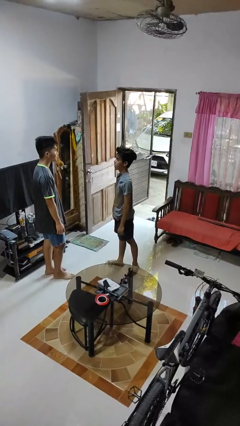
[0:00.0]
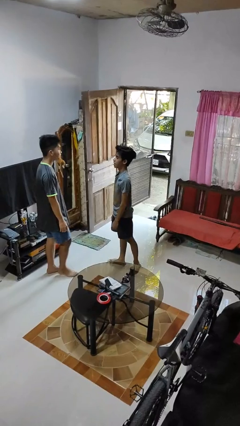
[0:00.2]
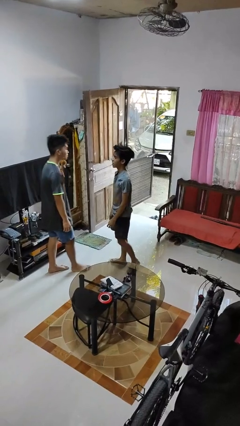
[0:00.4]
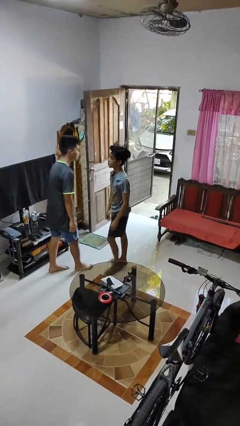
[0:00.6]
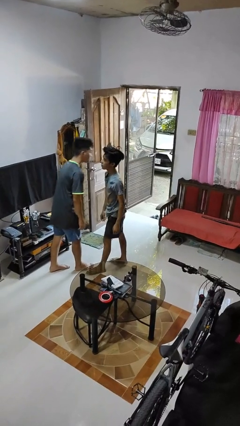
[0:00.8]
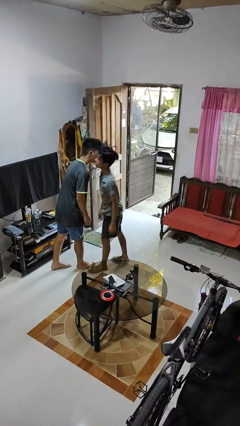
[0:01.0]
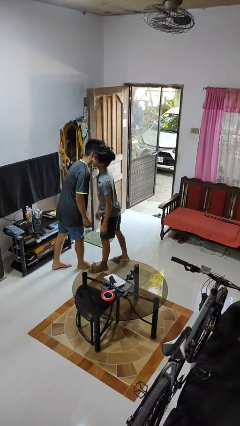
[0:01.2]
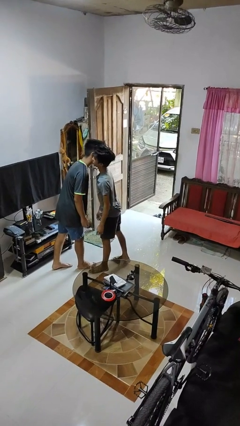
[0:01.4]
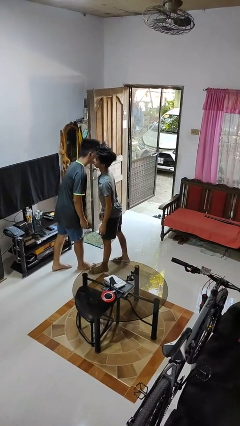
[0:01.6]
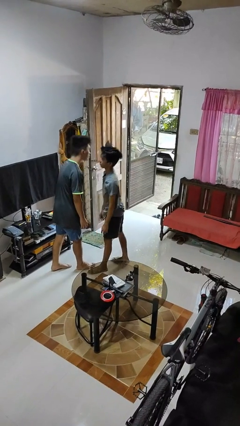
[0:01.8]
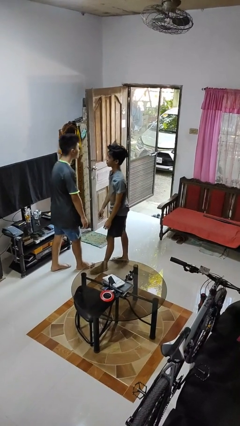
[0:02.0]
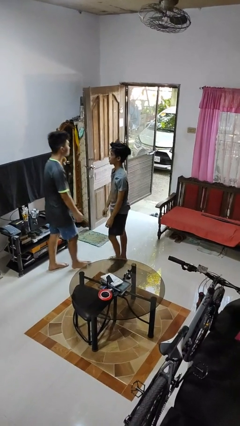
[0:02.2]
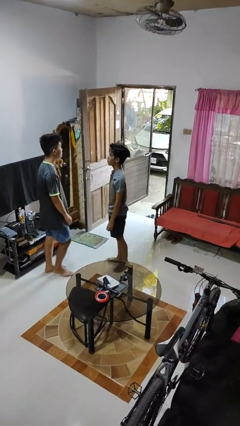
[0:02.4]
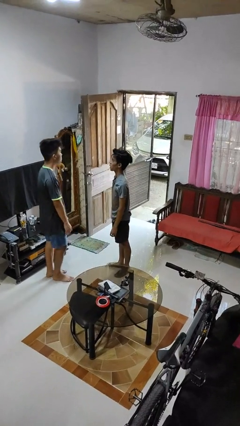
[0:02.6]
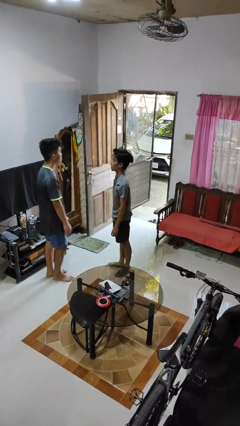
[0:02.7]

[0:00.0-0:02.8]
person kisses cheek of person

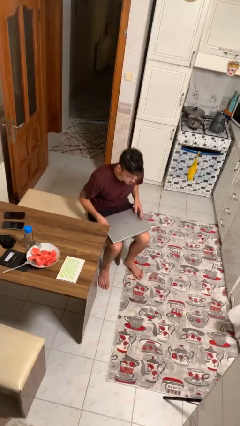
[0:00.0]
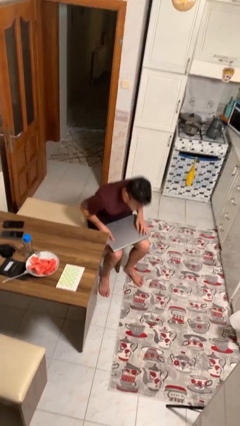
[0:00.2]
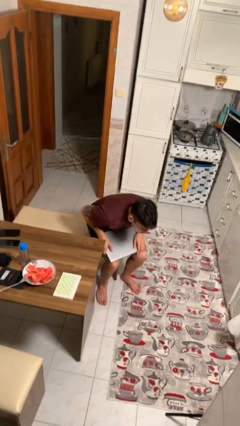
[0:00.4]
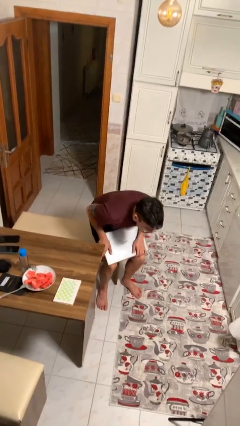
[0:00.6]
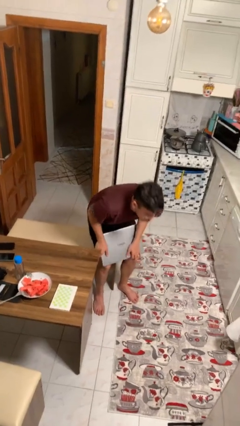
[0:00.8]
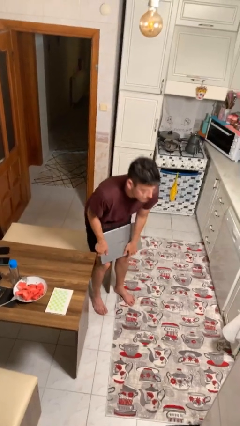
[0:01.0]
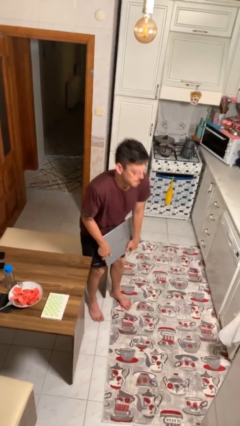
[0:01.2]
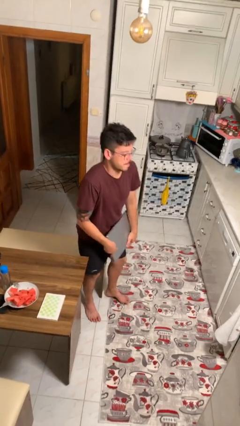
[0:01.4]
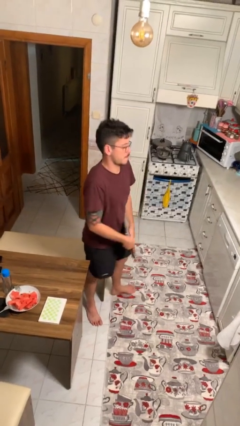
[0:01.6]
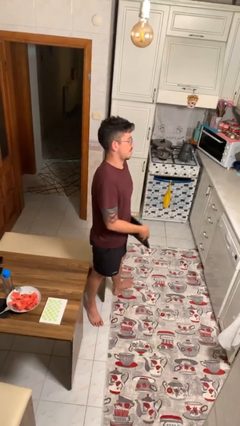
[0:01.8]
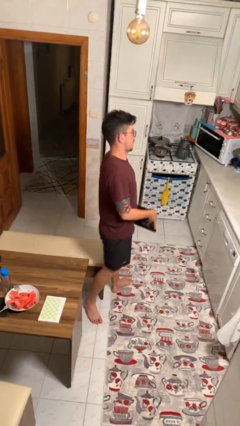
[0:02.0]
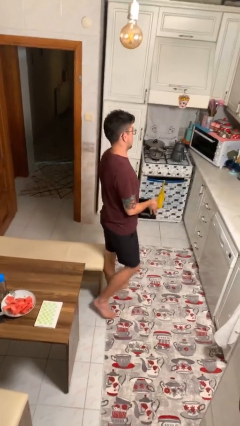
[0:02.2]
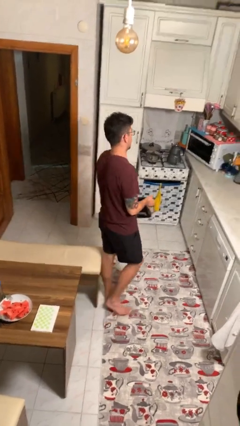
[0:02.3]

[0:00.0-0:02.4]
person stands up

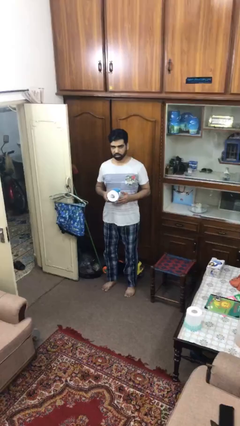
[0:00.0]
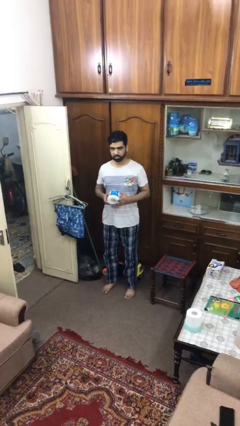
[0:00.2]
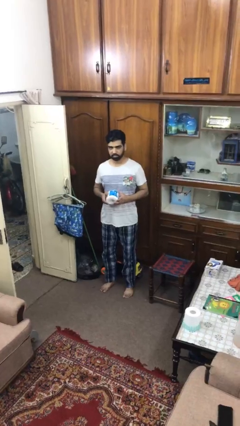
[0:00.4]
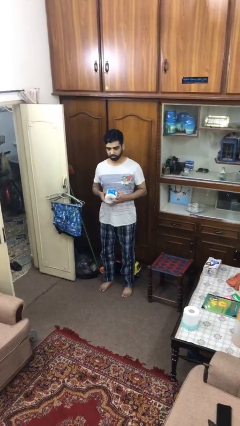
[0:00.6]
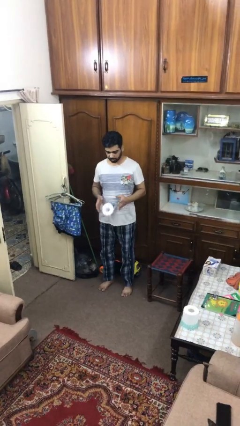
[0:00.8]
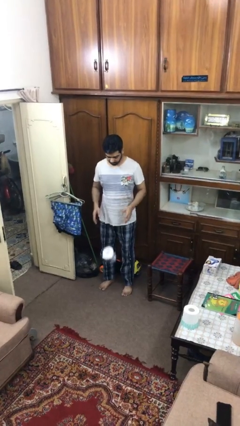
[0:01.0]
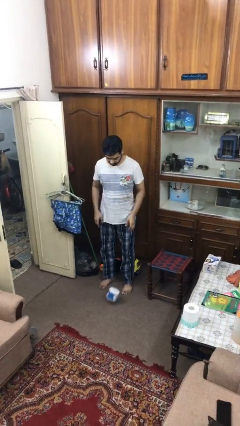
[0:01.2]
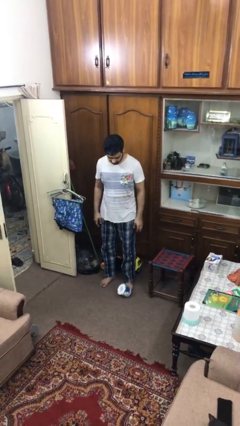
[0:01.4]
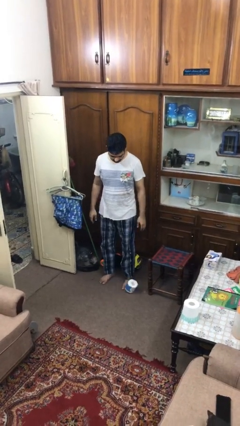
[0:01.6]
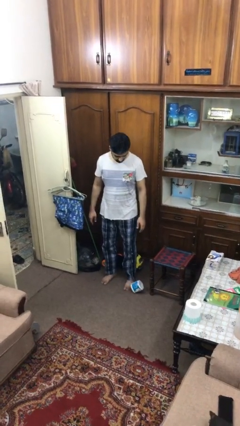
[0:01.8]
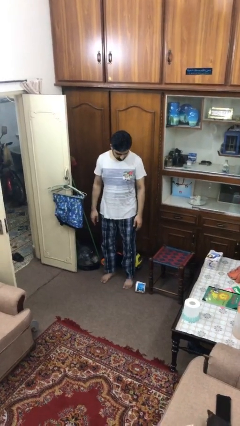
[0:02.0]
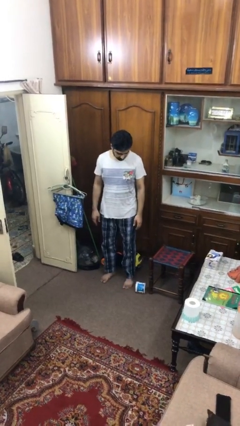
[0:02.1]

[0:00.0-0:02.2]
person drops object

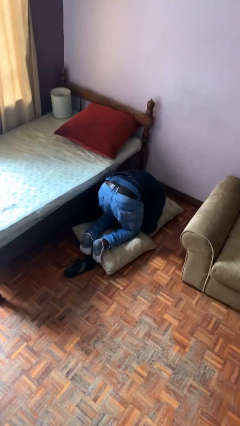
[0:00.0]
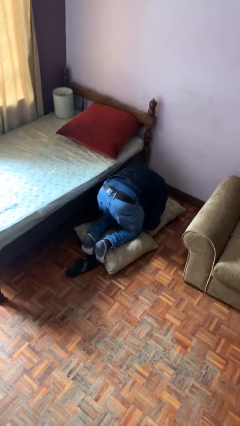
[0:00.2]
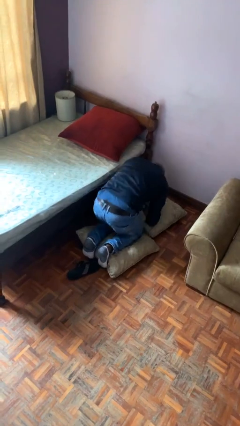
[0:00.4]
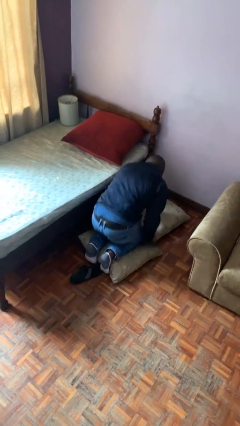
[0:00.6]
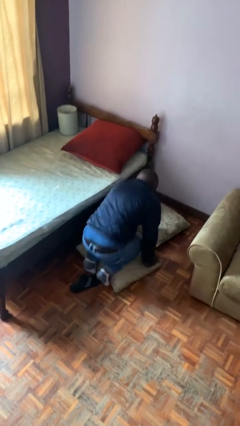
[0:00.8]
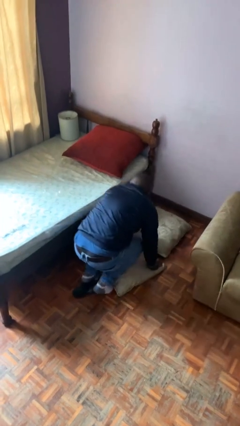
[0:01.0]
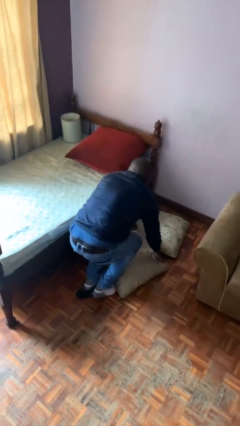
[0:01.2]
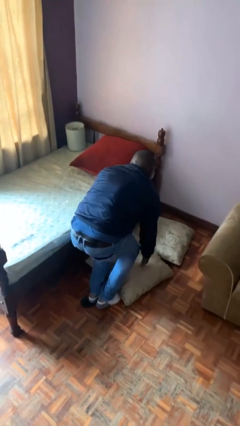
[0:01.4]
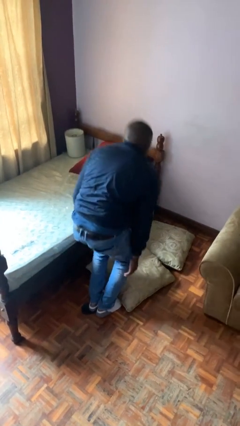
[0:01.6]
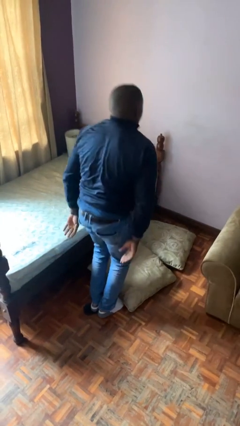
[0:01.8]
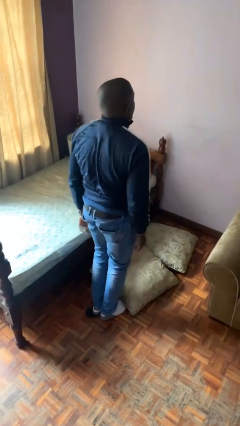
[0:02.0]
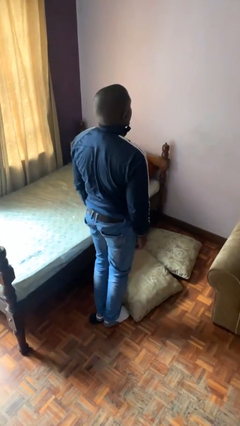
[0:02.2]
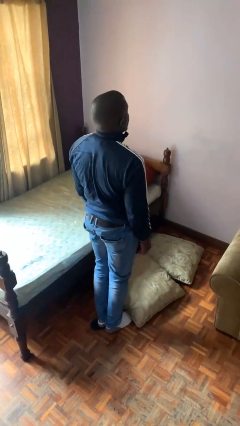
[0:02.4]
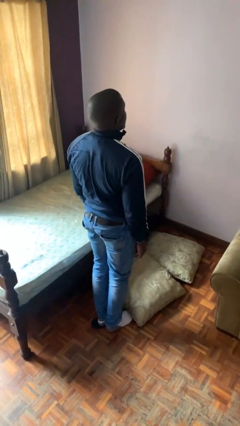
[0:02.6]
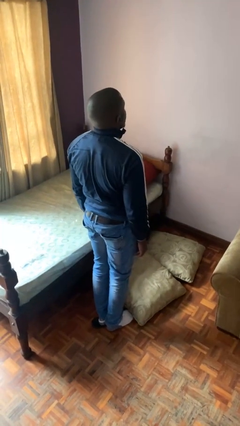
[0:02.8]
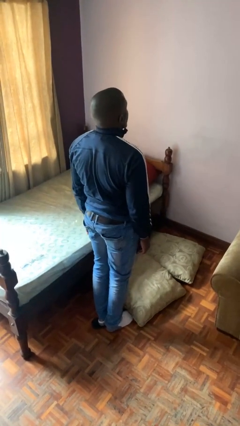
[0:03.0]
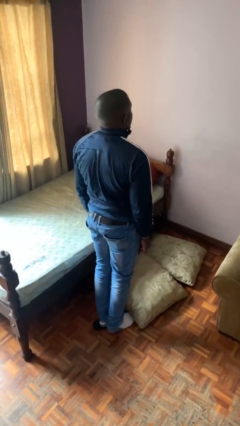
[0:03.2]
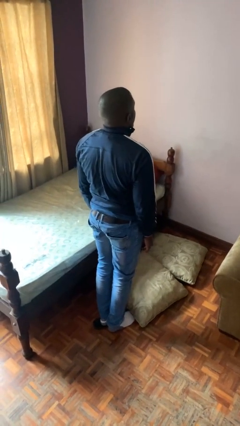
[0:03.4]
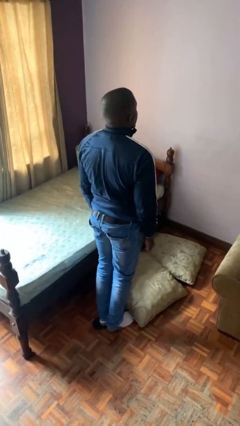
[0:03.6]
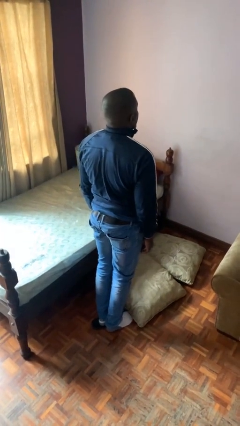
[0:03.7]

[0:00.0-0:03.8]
person stands up from floor

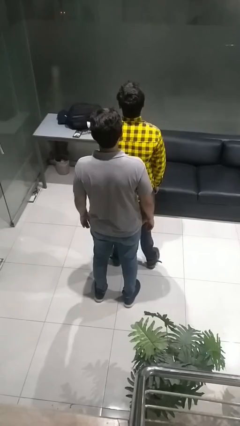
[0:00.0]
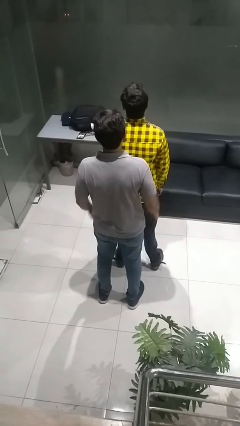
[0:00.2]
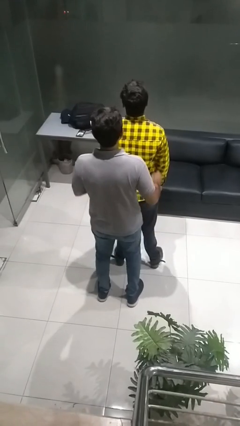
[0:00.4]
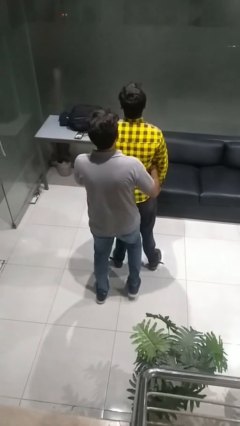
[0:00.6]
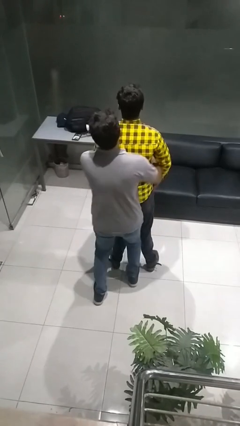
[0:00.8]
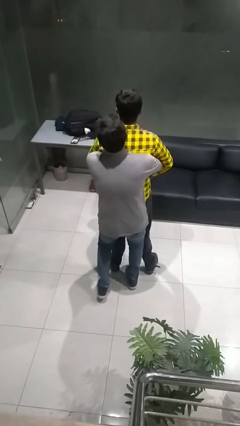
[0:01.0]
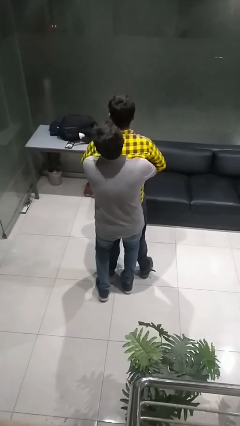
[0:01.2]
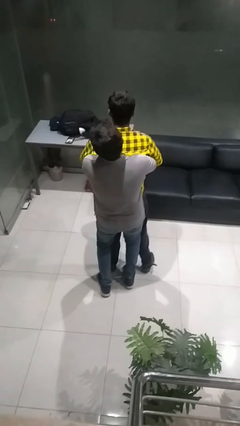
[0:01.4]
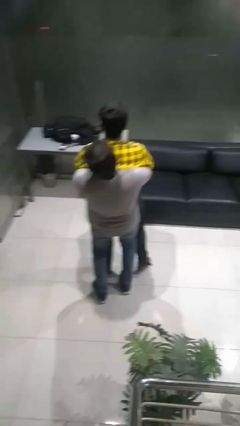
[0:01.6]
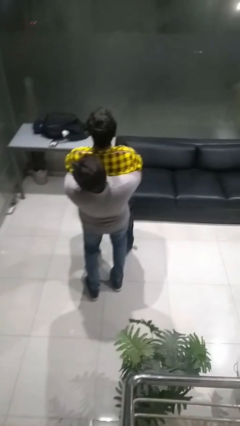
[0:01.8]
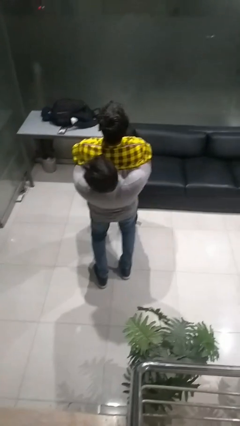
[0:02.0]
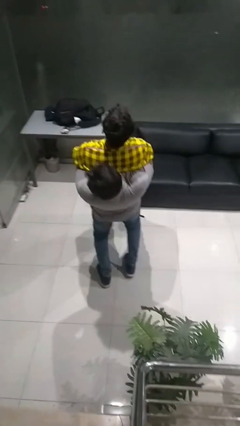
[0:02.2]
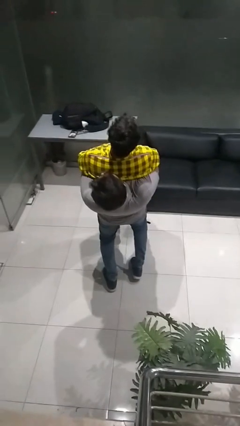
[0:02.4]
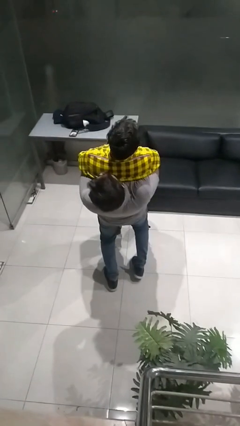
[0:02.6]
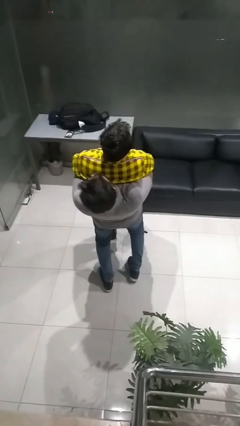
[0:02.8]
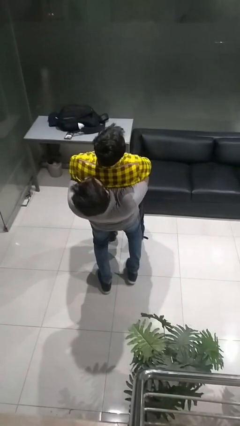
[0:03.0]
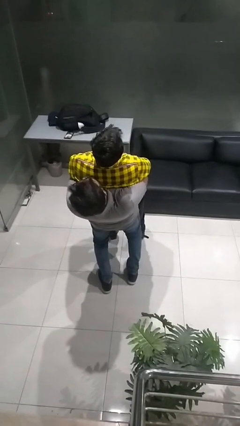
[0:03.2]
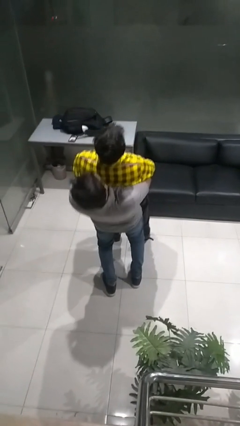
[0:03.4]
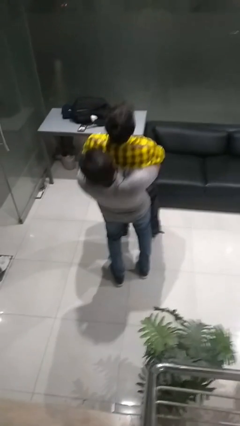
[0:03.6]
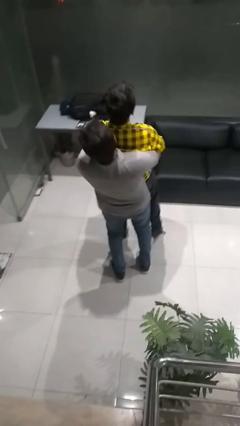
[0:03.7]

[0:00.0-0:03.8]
person picks up person

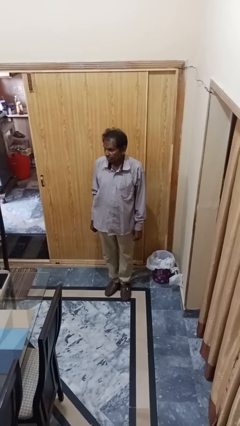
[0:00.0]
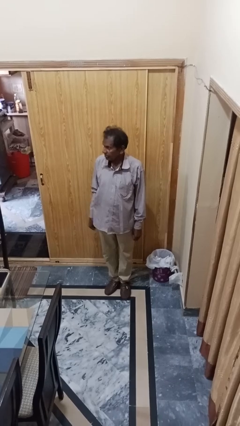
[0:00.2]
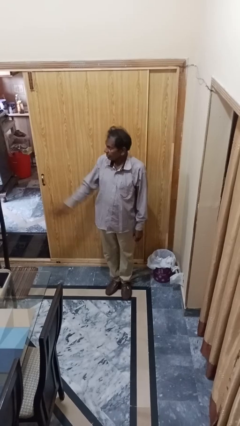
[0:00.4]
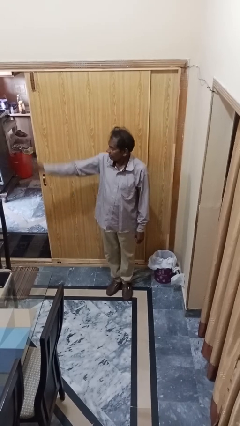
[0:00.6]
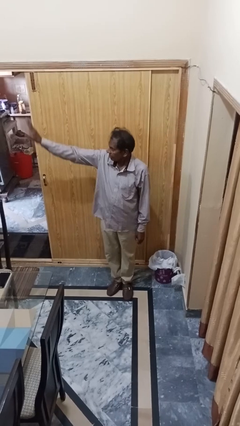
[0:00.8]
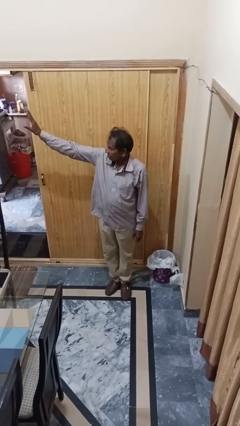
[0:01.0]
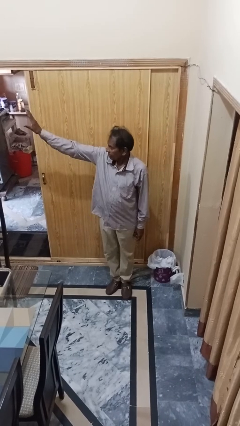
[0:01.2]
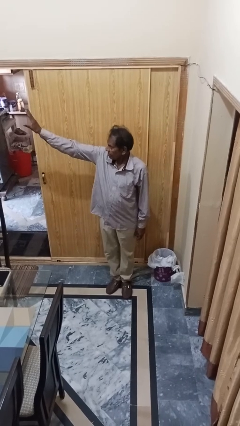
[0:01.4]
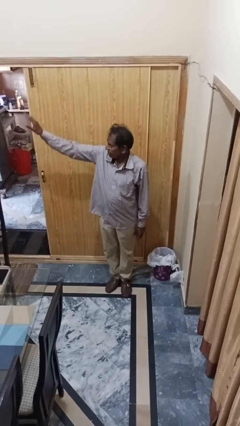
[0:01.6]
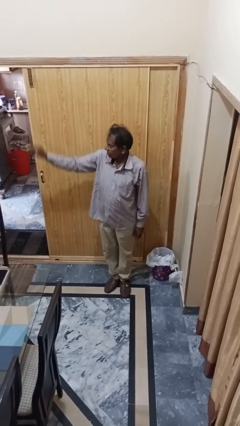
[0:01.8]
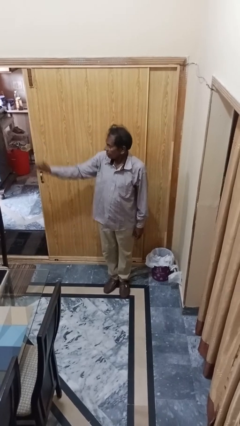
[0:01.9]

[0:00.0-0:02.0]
person gestures raise hand

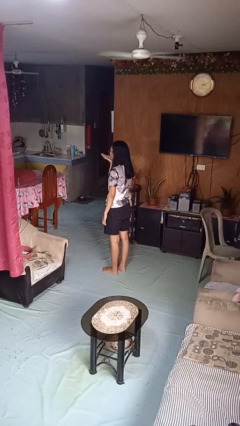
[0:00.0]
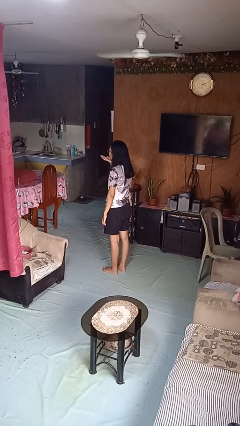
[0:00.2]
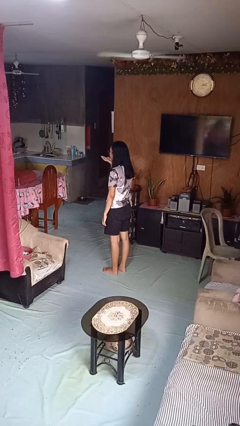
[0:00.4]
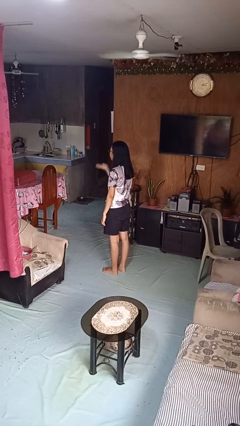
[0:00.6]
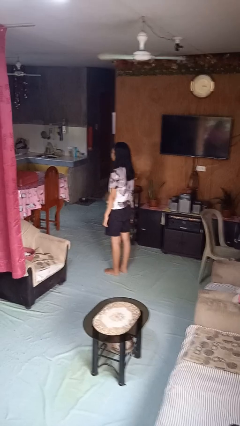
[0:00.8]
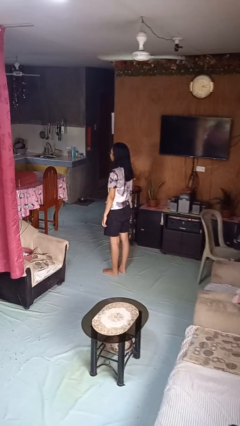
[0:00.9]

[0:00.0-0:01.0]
person gestures blow kiss
